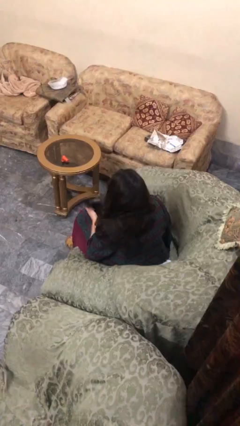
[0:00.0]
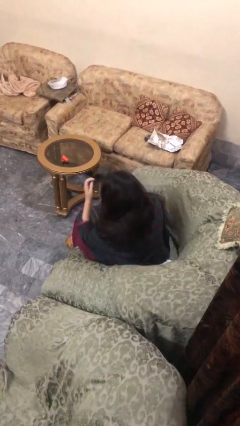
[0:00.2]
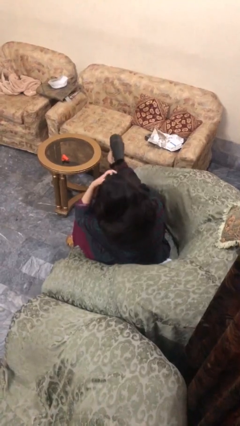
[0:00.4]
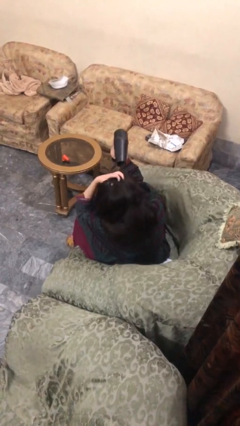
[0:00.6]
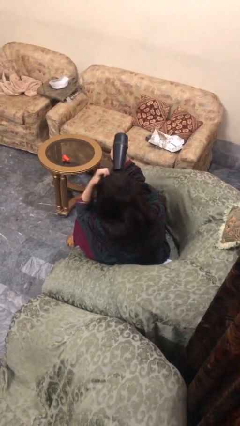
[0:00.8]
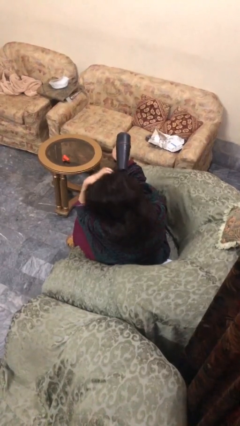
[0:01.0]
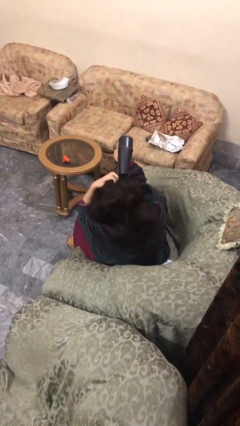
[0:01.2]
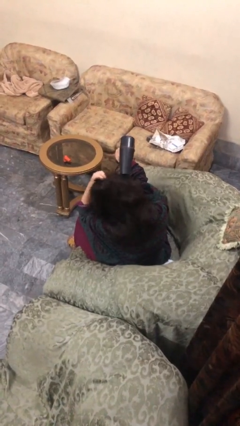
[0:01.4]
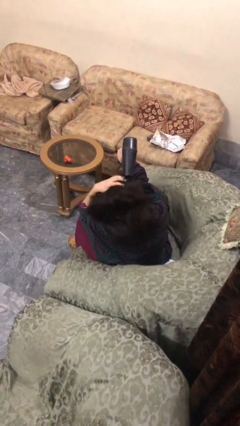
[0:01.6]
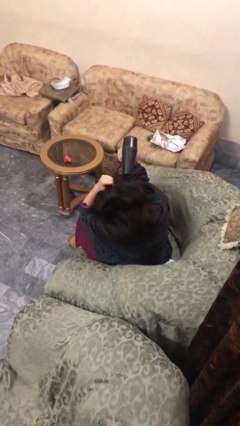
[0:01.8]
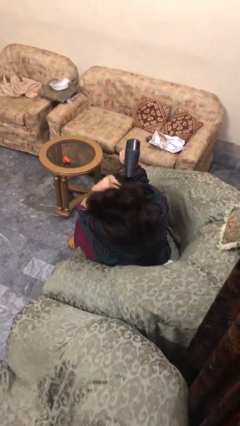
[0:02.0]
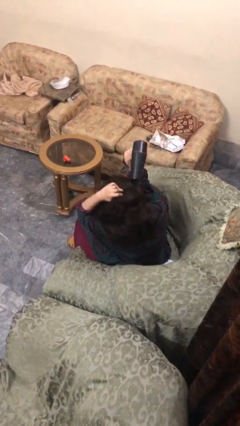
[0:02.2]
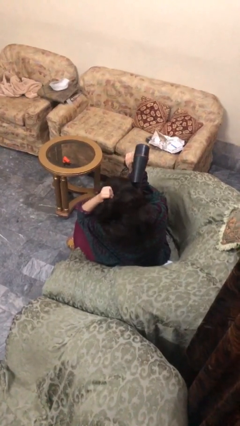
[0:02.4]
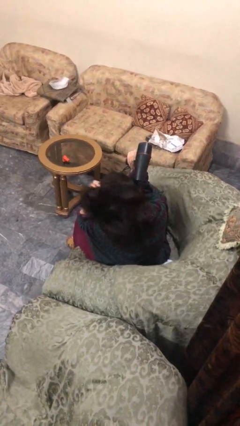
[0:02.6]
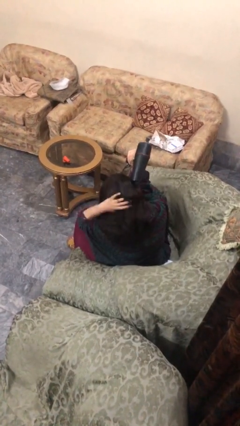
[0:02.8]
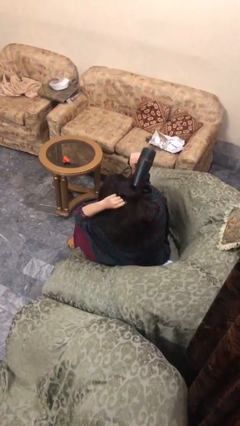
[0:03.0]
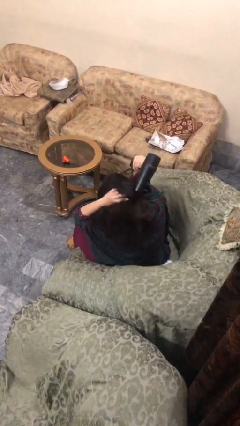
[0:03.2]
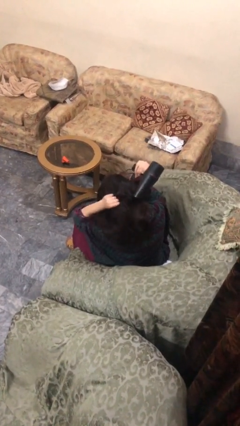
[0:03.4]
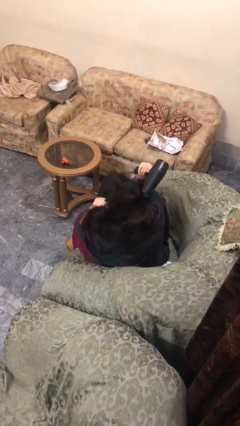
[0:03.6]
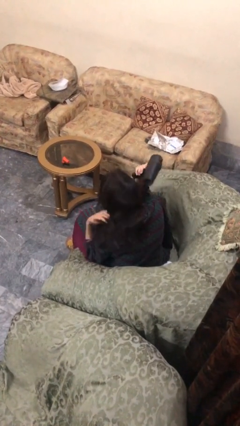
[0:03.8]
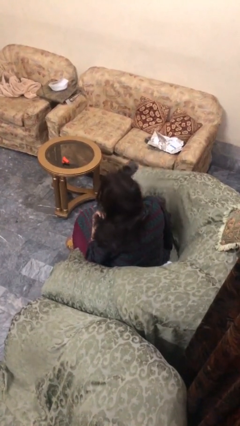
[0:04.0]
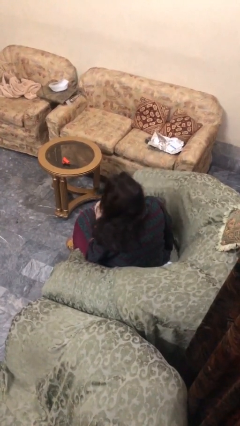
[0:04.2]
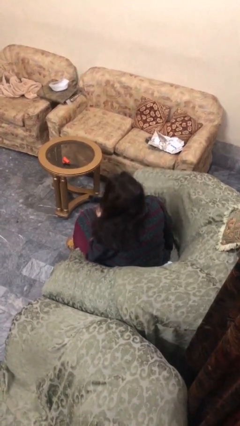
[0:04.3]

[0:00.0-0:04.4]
person dries hair with hairdryer

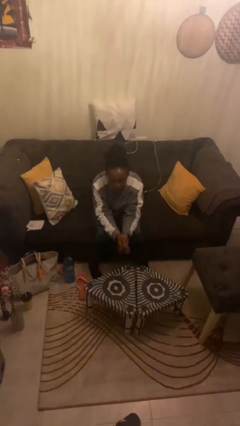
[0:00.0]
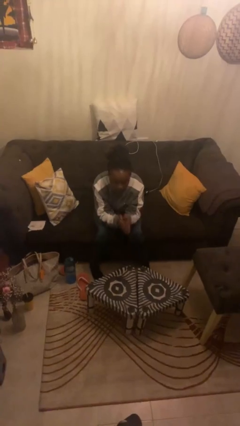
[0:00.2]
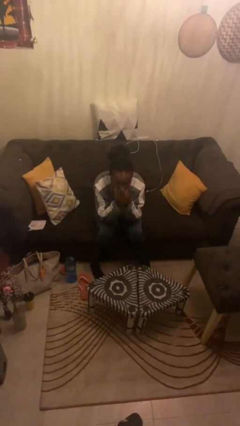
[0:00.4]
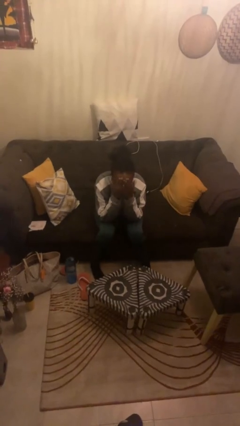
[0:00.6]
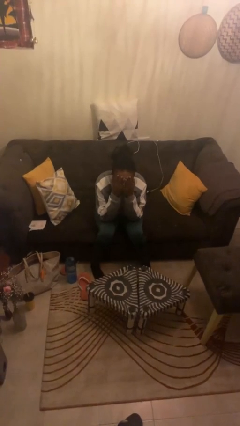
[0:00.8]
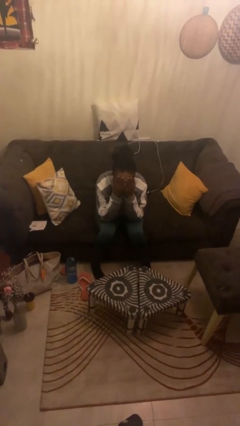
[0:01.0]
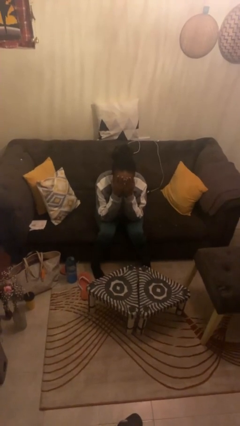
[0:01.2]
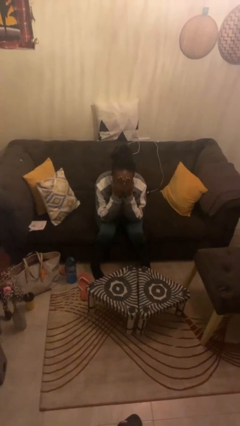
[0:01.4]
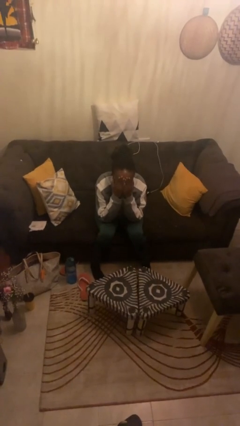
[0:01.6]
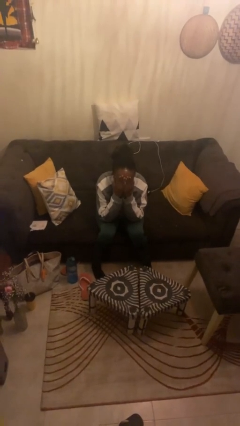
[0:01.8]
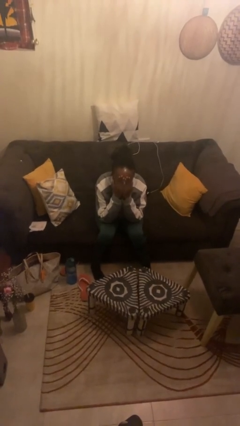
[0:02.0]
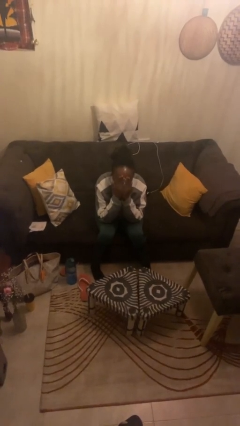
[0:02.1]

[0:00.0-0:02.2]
person covers face with hands

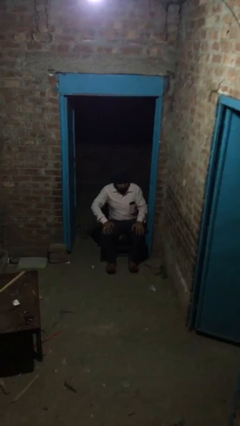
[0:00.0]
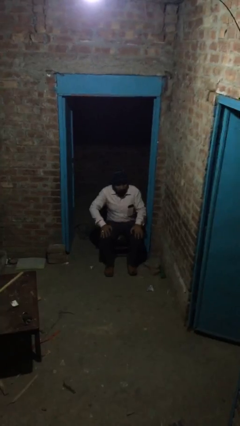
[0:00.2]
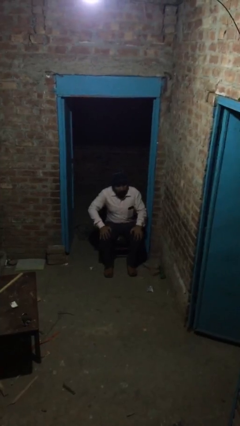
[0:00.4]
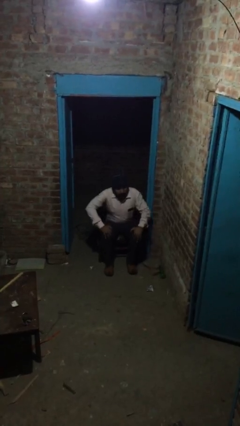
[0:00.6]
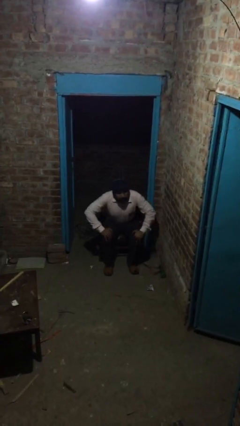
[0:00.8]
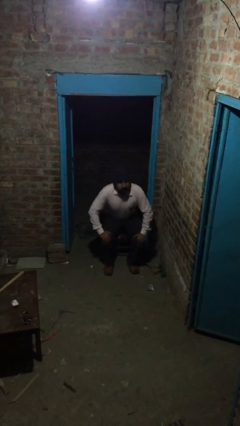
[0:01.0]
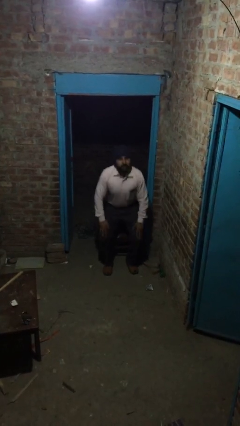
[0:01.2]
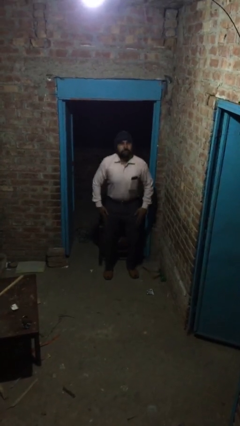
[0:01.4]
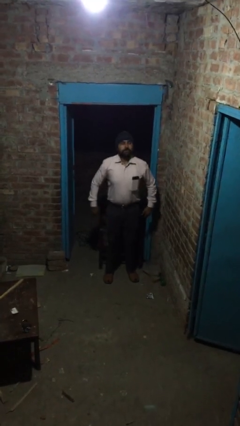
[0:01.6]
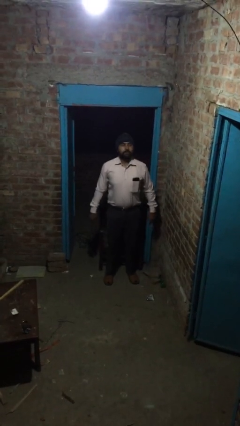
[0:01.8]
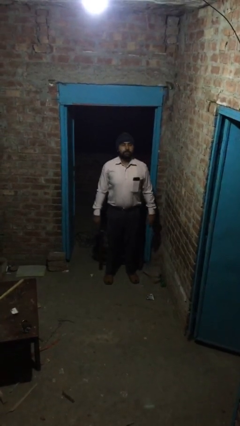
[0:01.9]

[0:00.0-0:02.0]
person stands up

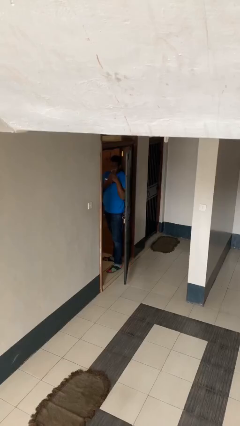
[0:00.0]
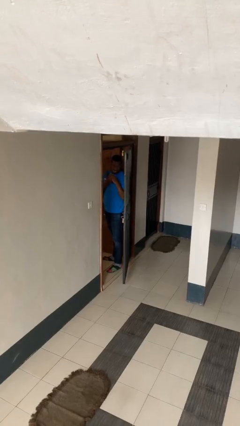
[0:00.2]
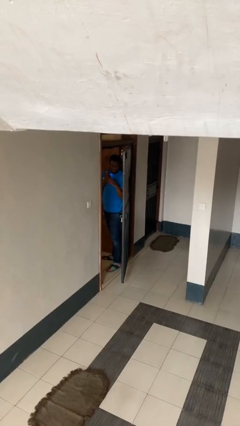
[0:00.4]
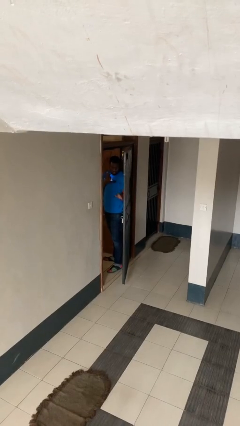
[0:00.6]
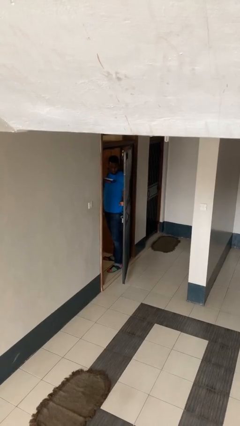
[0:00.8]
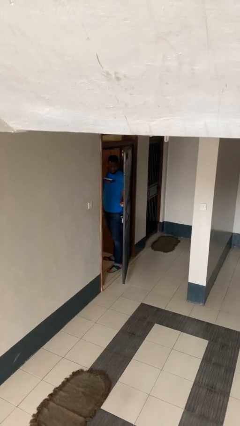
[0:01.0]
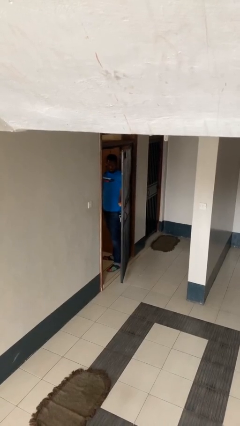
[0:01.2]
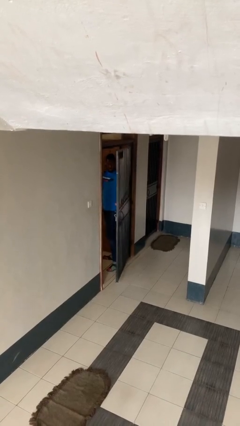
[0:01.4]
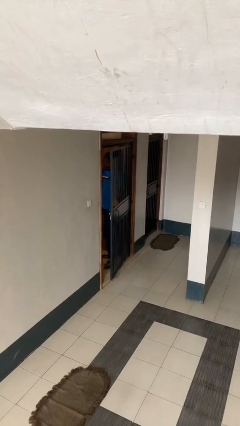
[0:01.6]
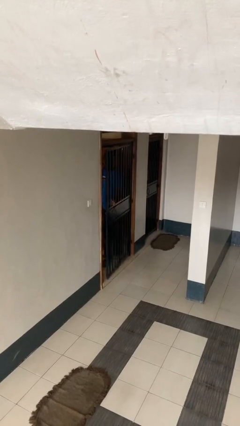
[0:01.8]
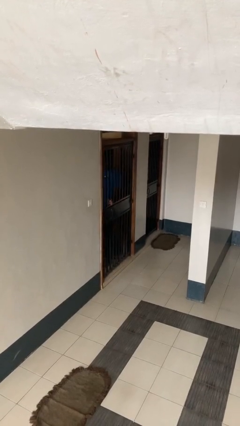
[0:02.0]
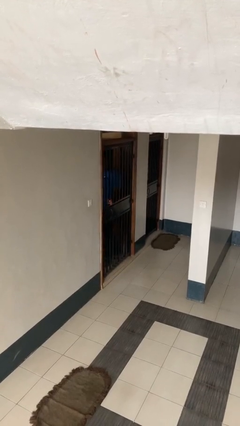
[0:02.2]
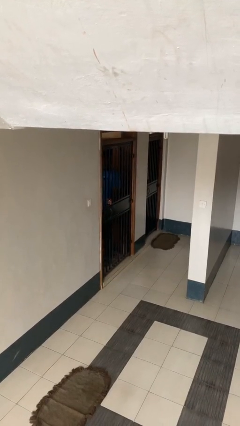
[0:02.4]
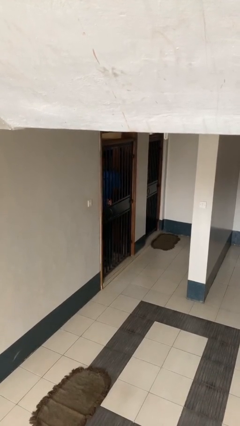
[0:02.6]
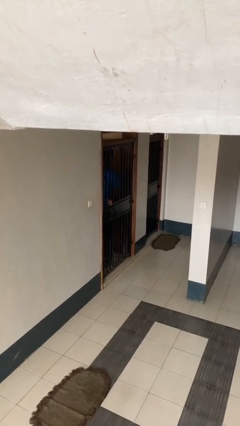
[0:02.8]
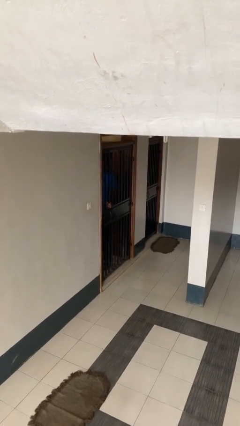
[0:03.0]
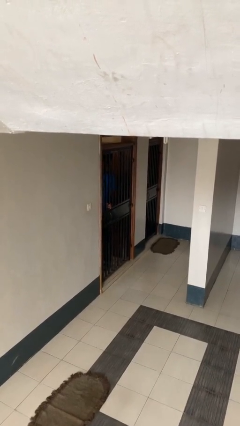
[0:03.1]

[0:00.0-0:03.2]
person closes facility door

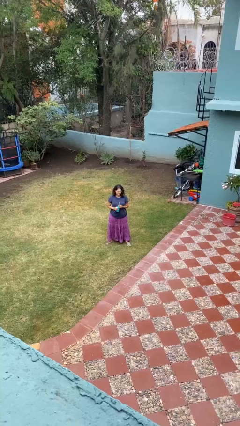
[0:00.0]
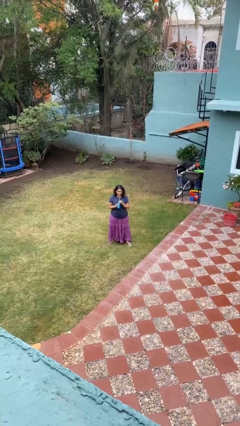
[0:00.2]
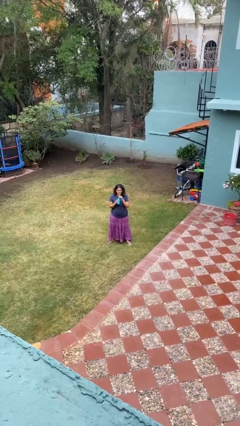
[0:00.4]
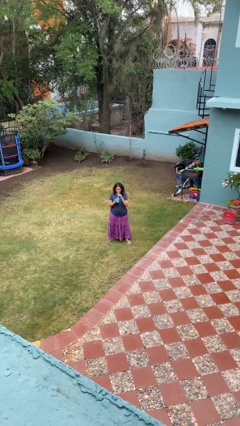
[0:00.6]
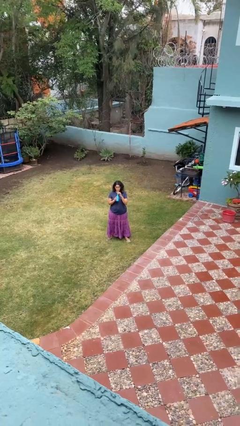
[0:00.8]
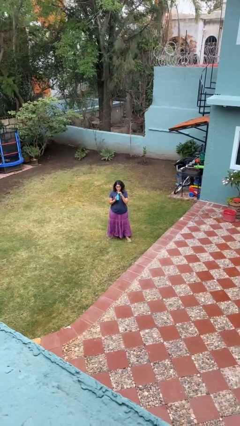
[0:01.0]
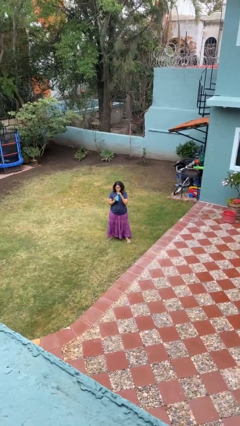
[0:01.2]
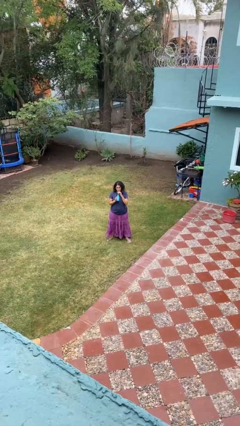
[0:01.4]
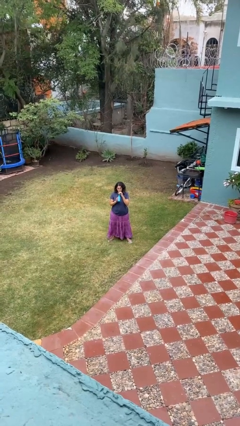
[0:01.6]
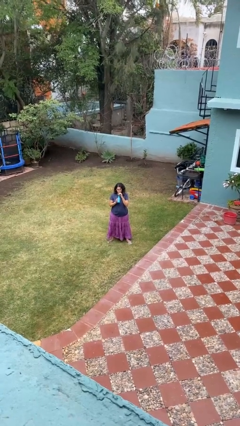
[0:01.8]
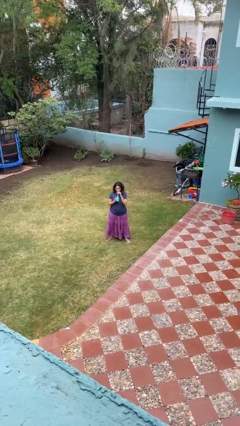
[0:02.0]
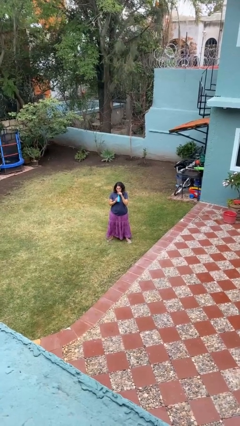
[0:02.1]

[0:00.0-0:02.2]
person drinks from straw

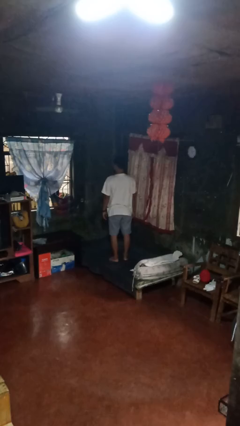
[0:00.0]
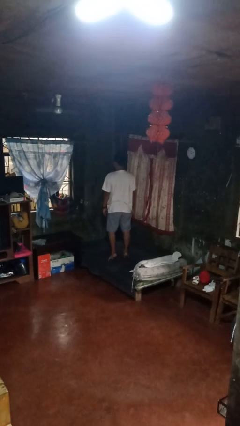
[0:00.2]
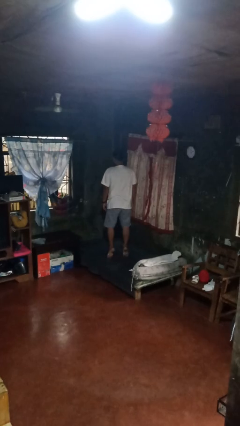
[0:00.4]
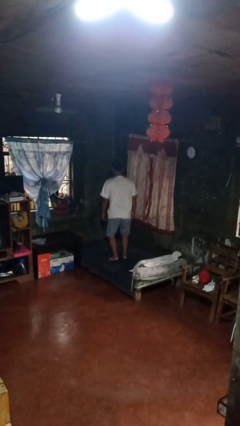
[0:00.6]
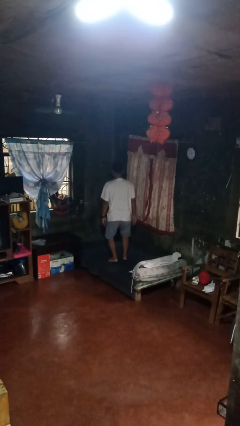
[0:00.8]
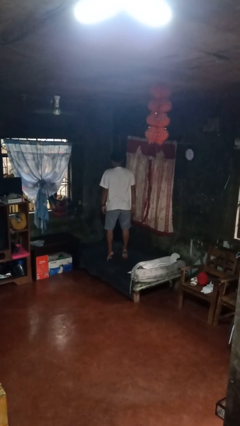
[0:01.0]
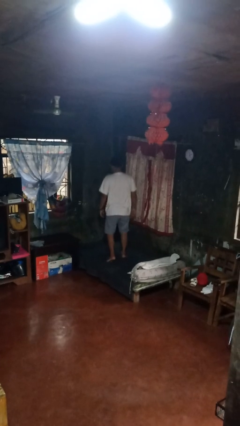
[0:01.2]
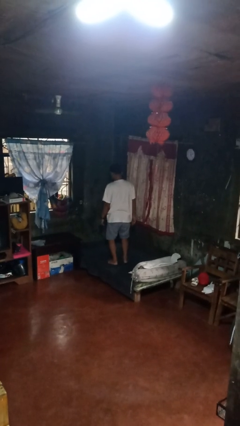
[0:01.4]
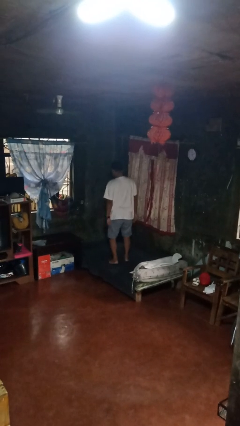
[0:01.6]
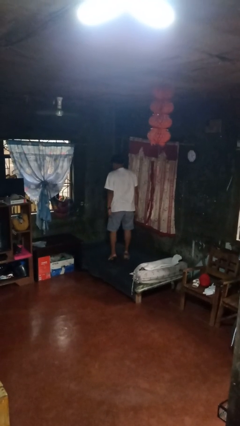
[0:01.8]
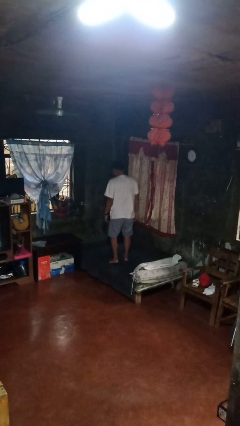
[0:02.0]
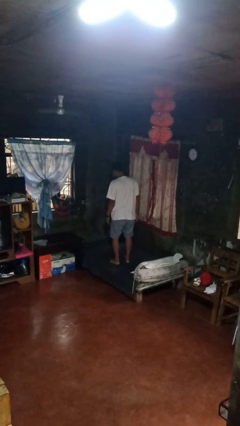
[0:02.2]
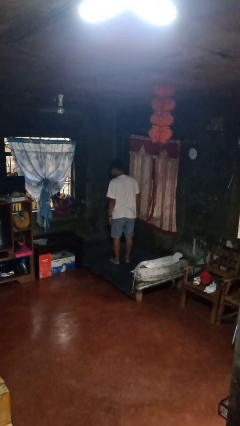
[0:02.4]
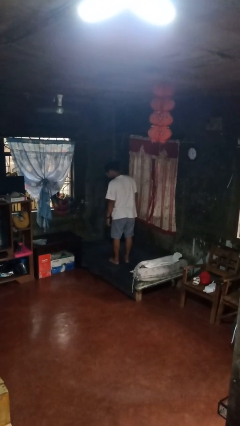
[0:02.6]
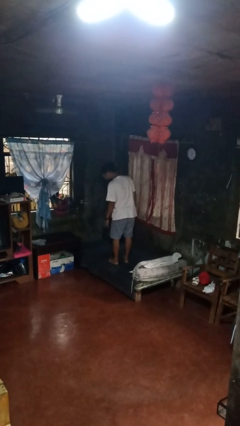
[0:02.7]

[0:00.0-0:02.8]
person jumps on bed

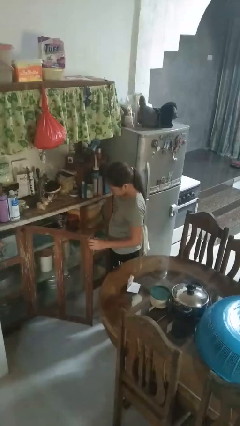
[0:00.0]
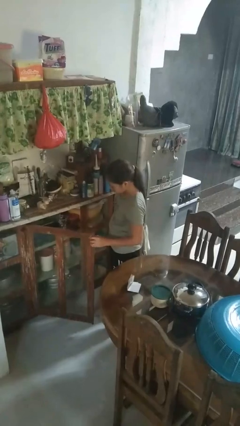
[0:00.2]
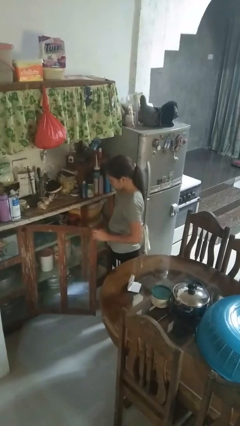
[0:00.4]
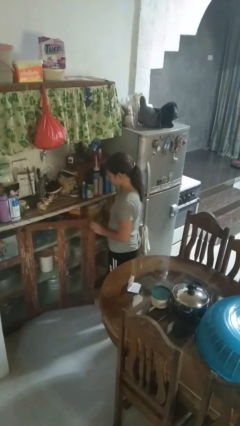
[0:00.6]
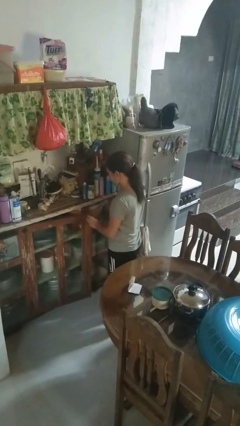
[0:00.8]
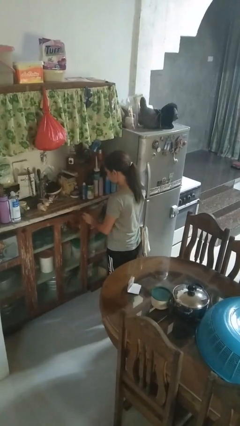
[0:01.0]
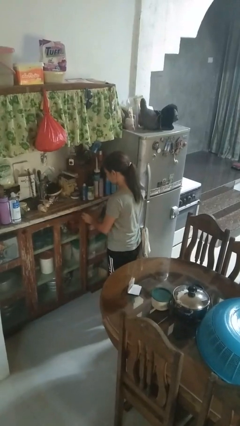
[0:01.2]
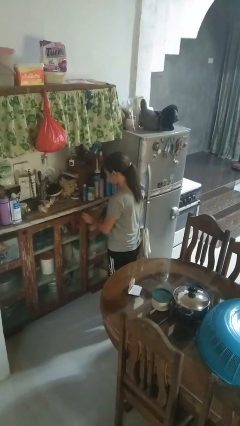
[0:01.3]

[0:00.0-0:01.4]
person closes cabinet
